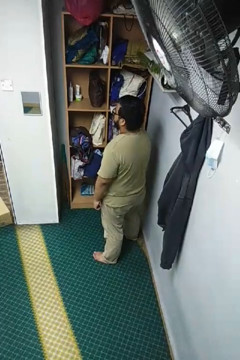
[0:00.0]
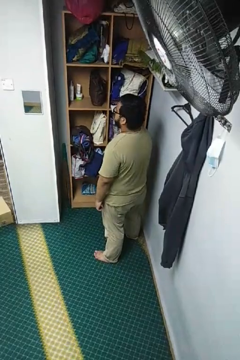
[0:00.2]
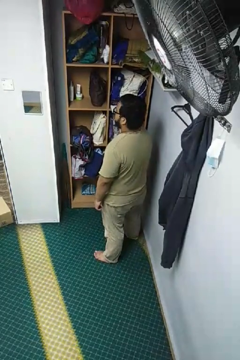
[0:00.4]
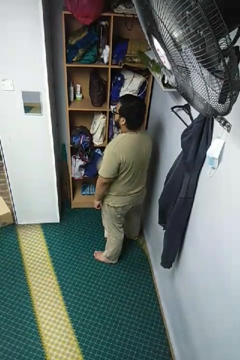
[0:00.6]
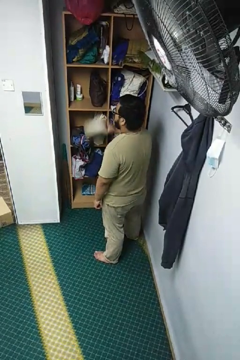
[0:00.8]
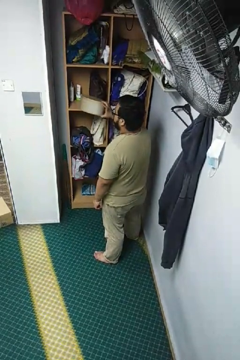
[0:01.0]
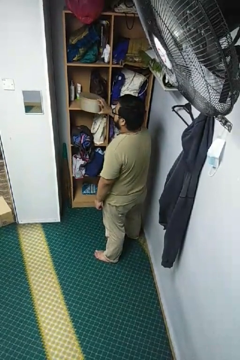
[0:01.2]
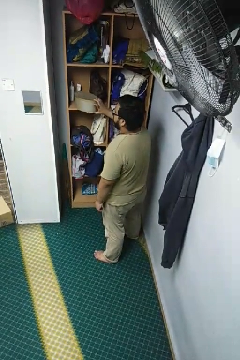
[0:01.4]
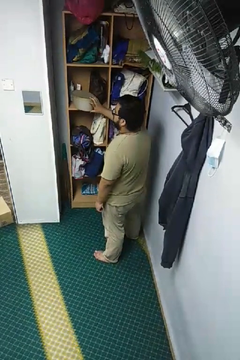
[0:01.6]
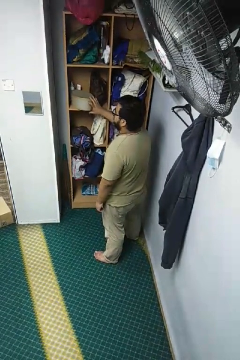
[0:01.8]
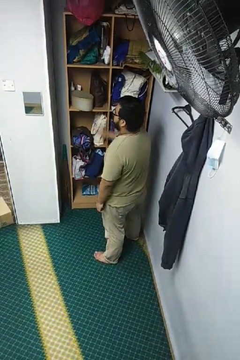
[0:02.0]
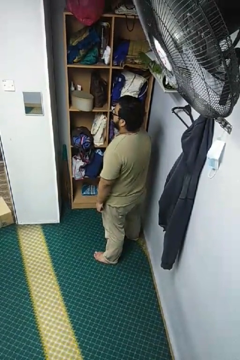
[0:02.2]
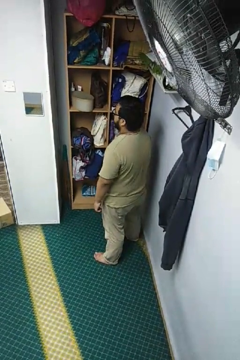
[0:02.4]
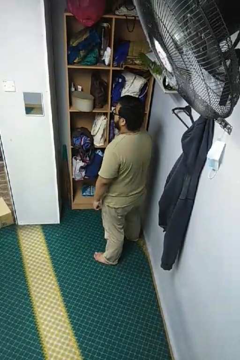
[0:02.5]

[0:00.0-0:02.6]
person puts down object into cabinet

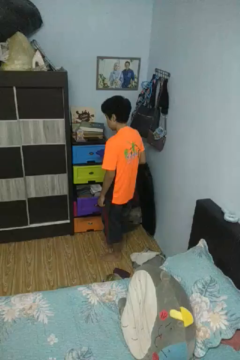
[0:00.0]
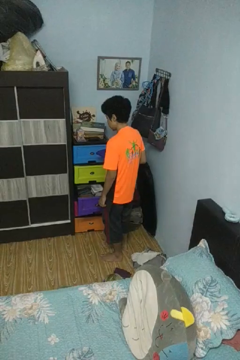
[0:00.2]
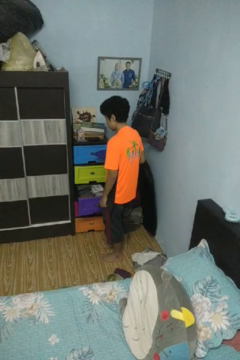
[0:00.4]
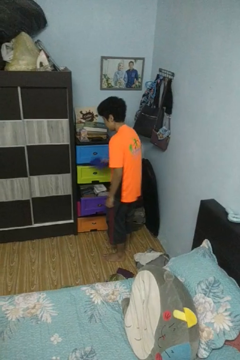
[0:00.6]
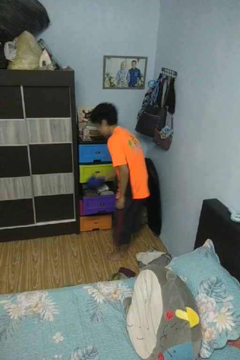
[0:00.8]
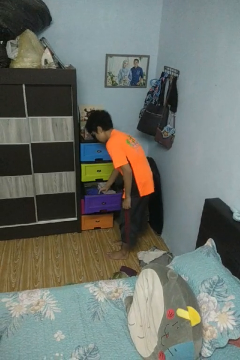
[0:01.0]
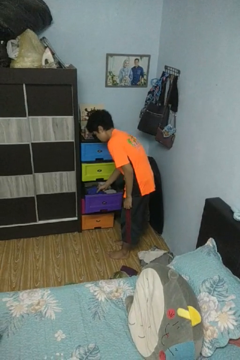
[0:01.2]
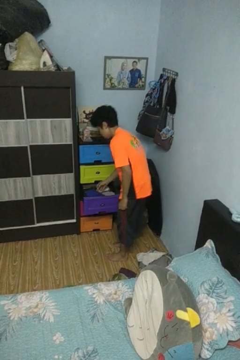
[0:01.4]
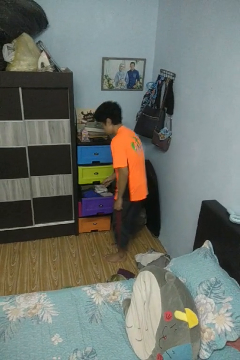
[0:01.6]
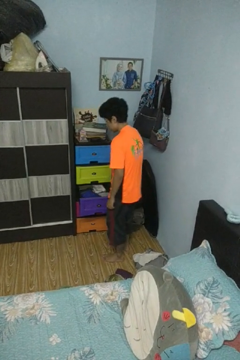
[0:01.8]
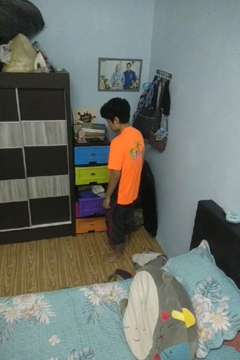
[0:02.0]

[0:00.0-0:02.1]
person puts clothes into dresser

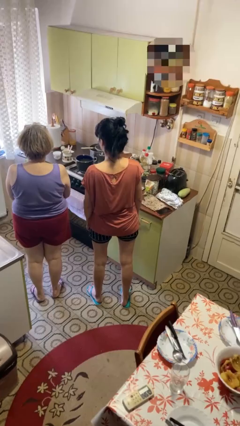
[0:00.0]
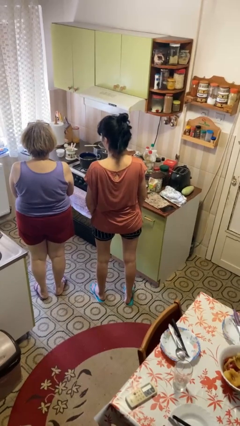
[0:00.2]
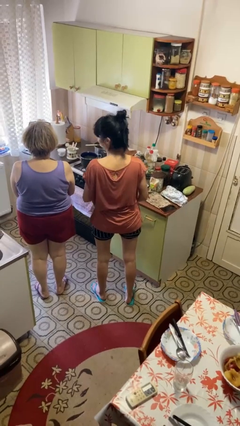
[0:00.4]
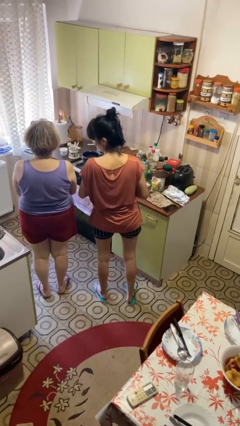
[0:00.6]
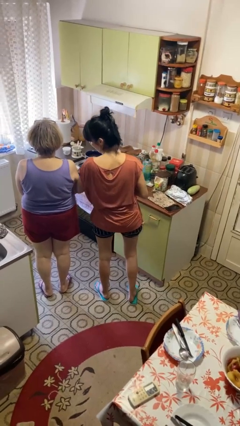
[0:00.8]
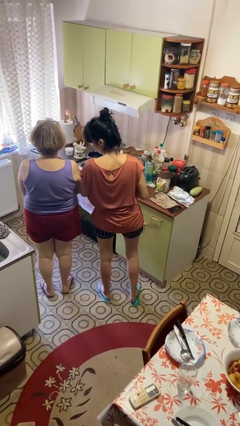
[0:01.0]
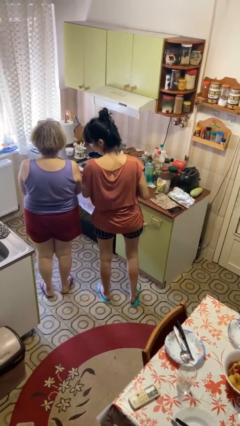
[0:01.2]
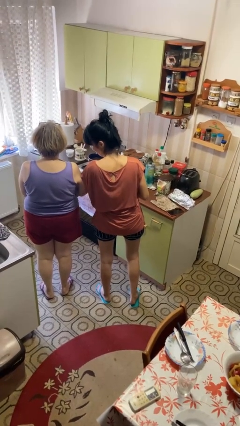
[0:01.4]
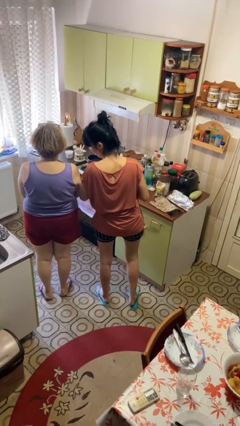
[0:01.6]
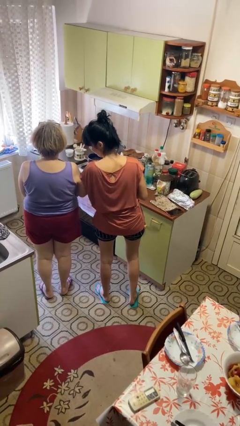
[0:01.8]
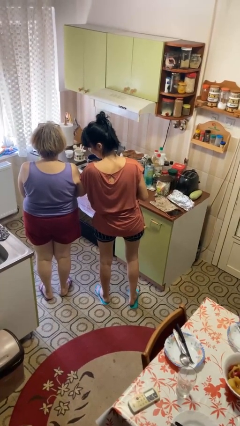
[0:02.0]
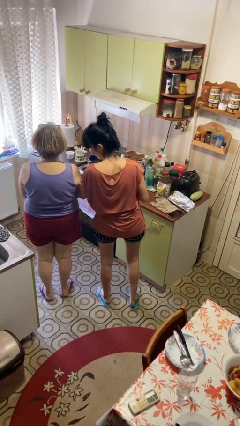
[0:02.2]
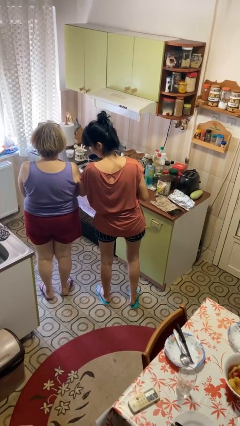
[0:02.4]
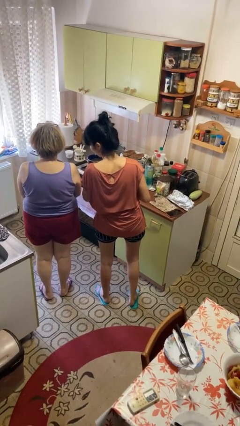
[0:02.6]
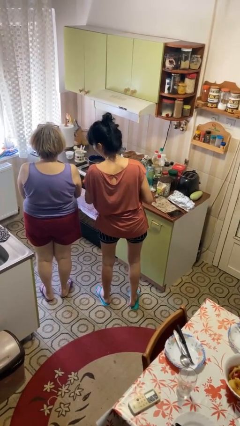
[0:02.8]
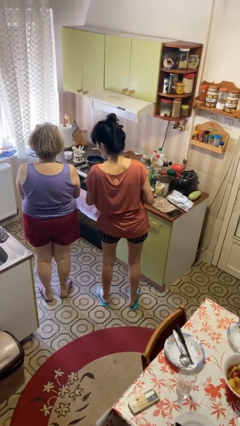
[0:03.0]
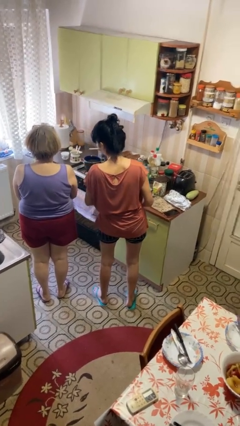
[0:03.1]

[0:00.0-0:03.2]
person nudges person with elbow

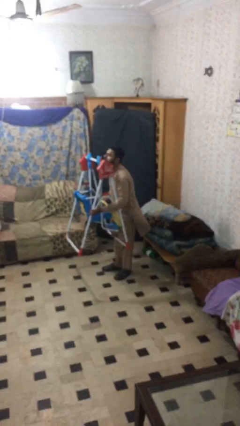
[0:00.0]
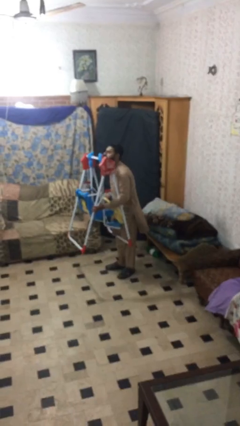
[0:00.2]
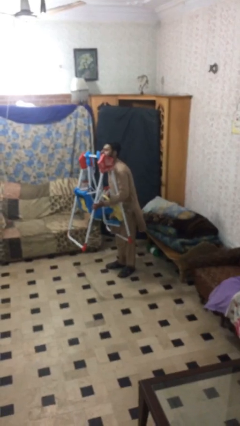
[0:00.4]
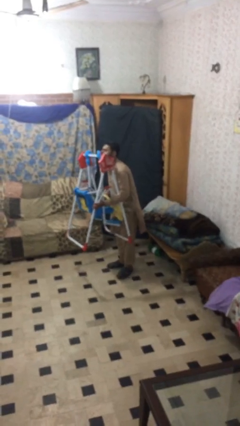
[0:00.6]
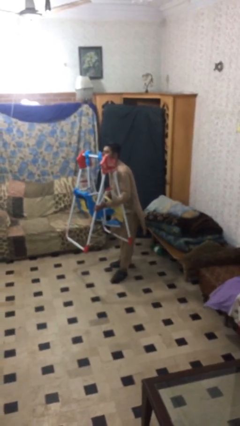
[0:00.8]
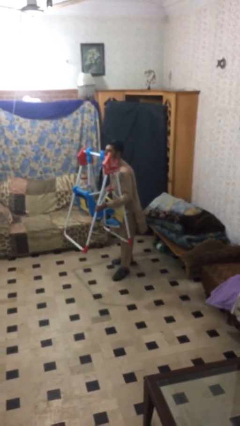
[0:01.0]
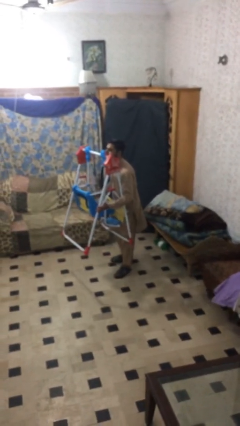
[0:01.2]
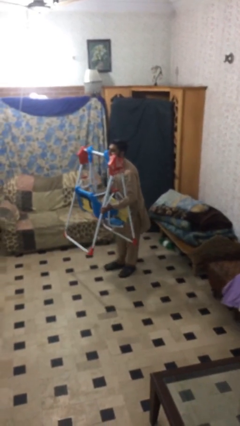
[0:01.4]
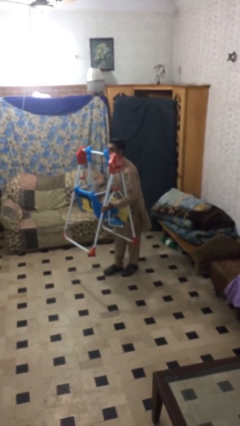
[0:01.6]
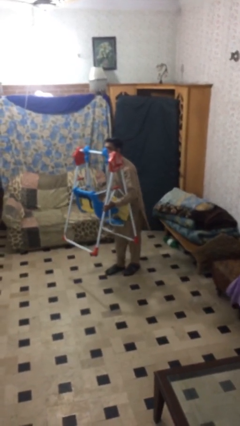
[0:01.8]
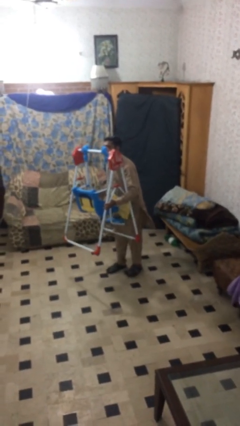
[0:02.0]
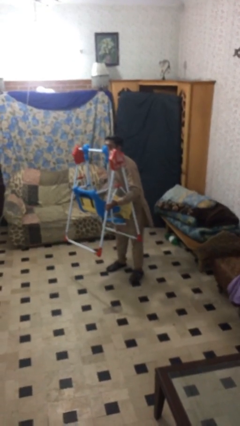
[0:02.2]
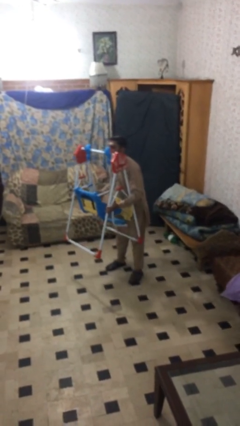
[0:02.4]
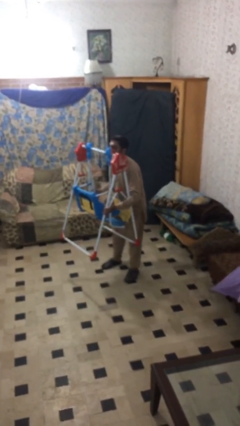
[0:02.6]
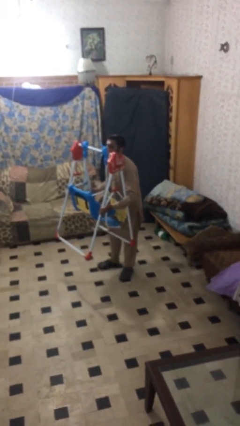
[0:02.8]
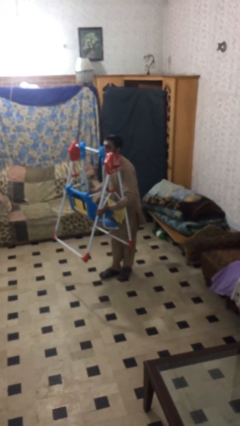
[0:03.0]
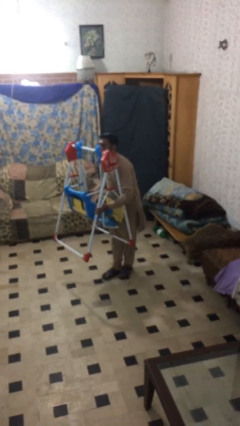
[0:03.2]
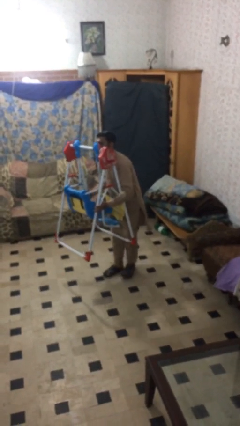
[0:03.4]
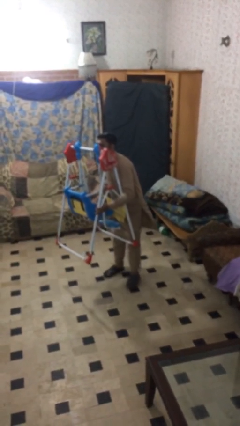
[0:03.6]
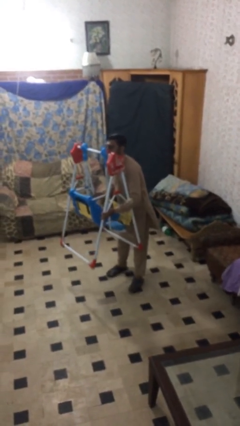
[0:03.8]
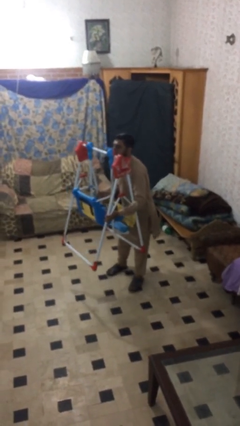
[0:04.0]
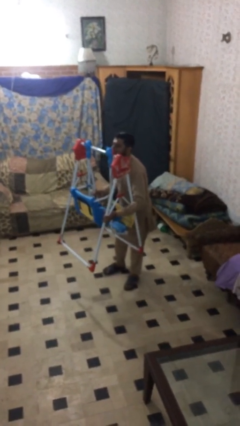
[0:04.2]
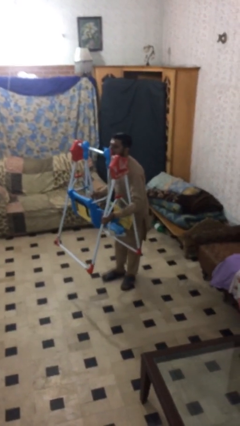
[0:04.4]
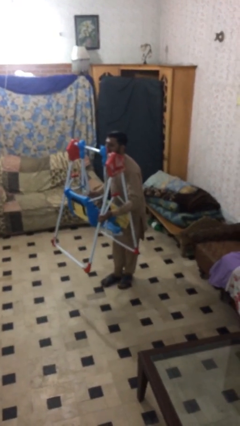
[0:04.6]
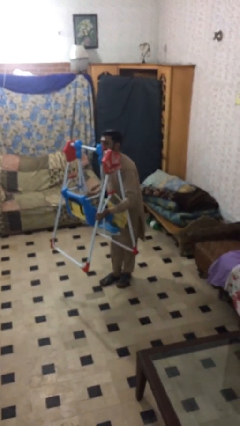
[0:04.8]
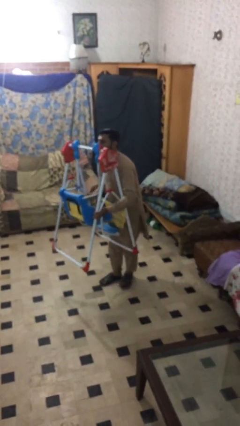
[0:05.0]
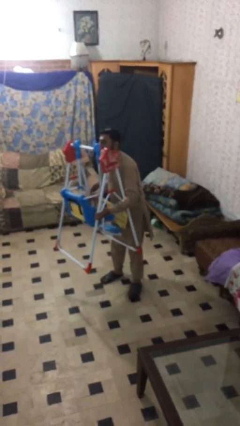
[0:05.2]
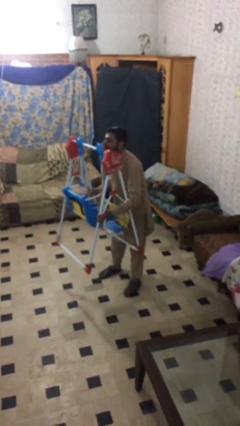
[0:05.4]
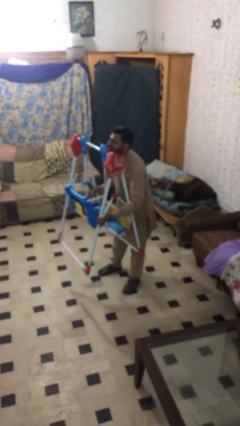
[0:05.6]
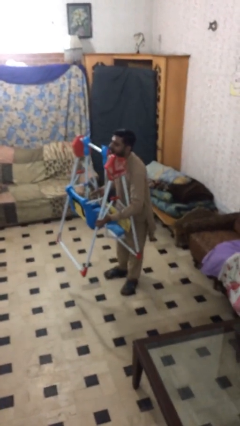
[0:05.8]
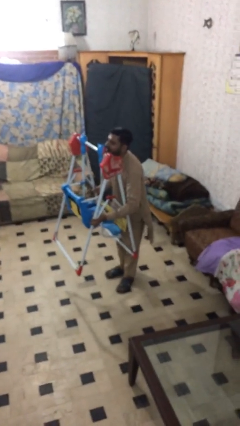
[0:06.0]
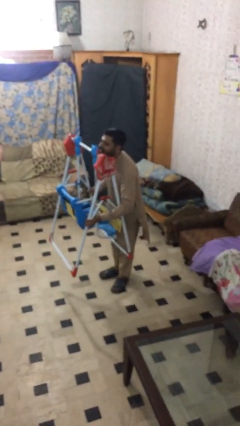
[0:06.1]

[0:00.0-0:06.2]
person carries heavy object

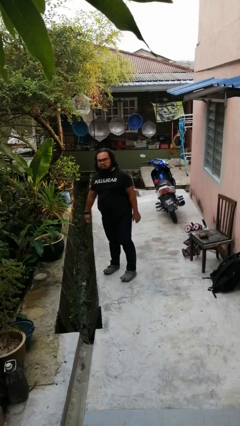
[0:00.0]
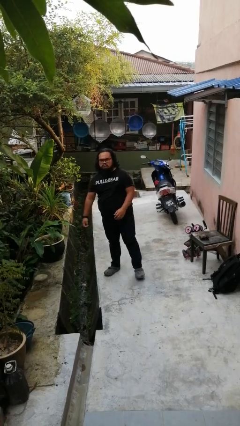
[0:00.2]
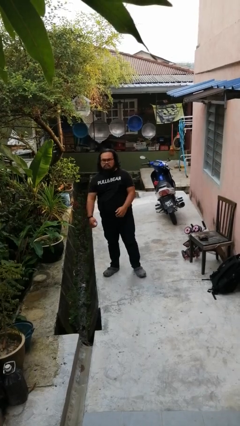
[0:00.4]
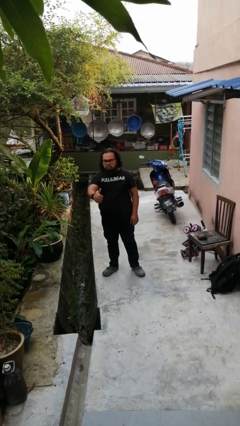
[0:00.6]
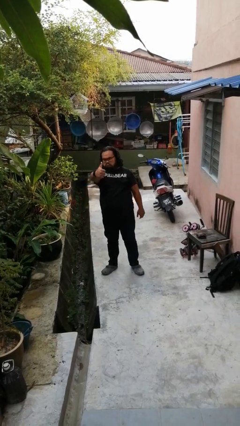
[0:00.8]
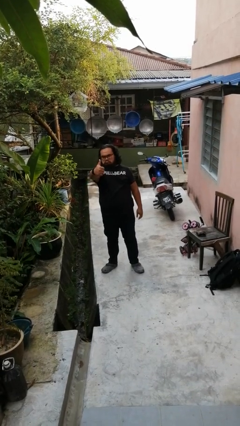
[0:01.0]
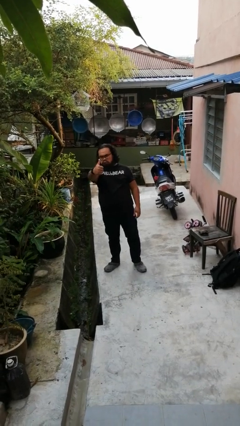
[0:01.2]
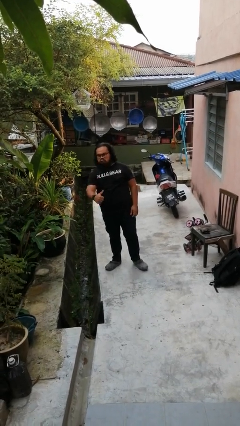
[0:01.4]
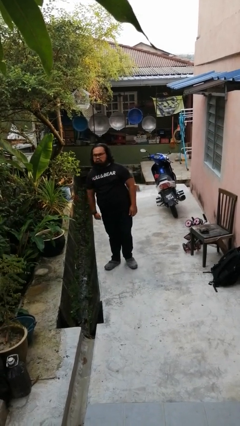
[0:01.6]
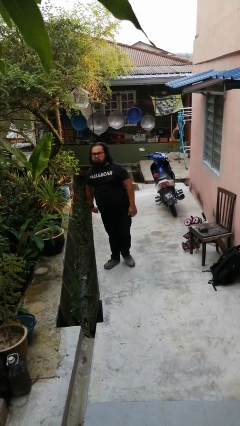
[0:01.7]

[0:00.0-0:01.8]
person gestures thumbs up

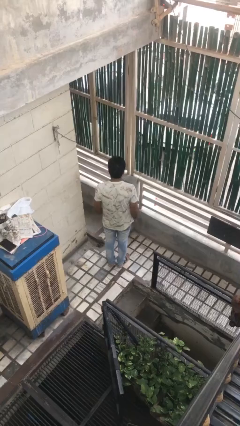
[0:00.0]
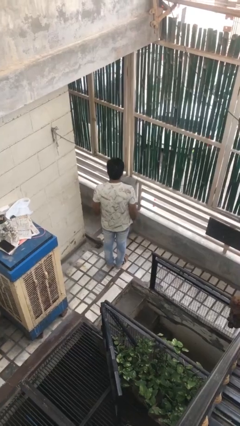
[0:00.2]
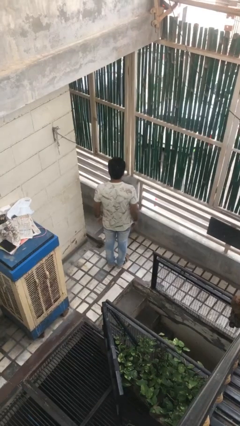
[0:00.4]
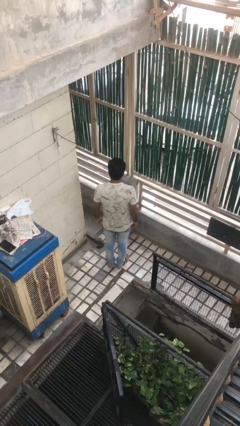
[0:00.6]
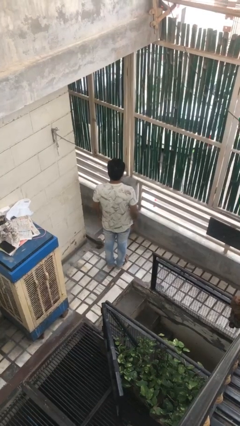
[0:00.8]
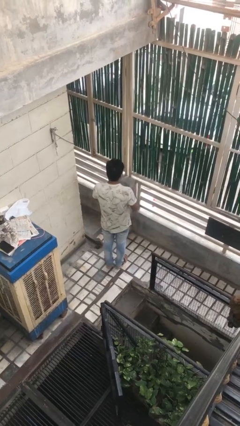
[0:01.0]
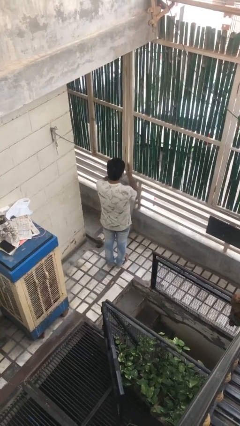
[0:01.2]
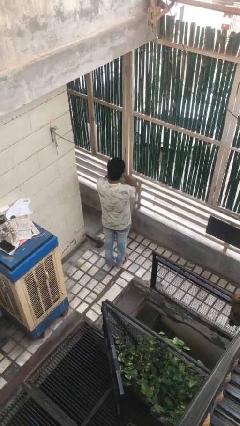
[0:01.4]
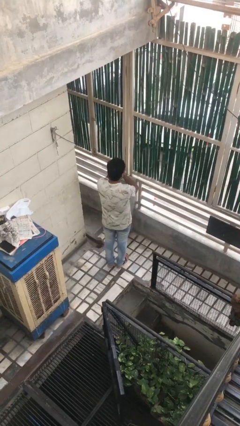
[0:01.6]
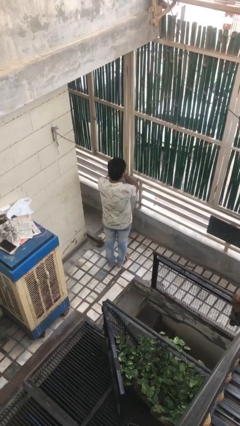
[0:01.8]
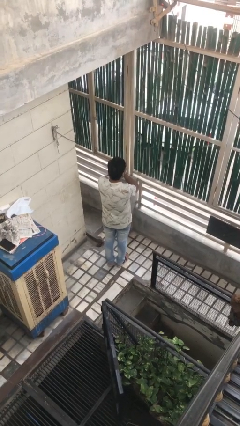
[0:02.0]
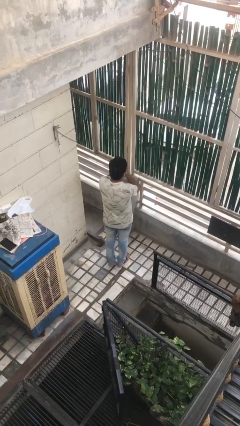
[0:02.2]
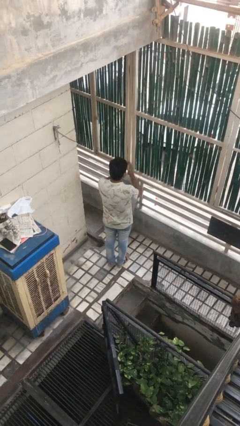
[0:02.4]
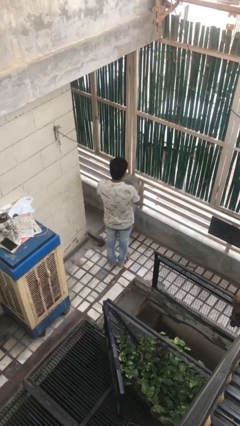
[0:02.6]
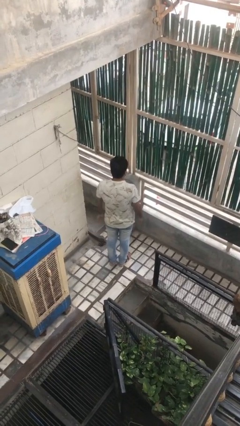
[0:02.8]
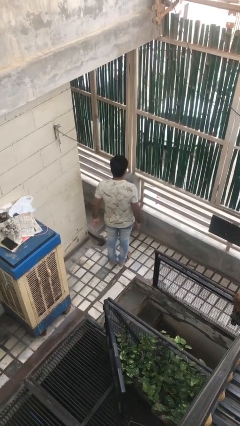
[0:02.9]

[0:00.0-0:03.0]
person covers face with hands
